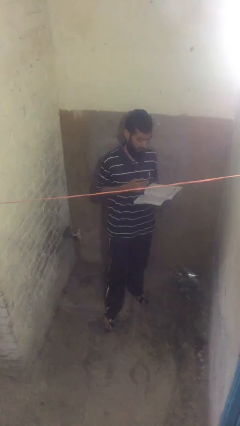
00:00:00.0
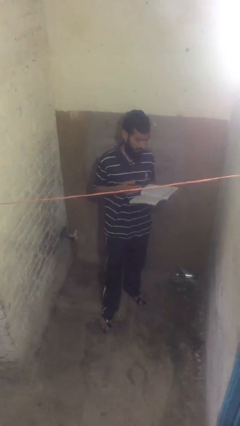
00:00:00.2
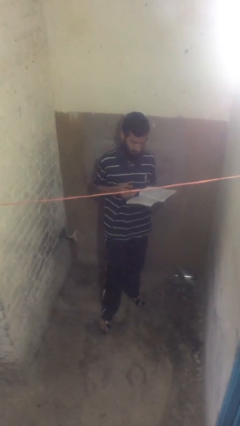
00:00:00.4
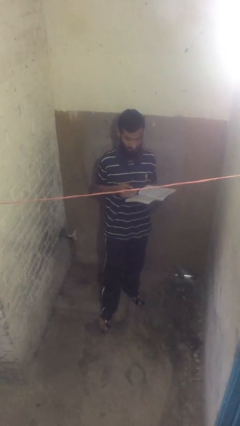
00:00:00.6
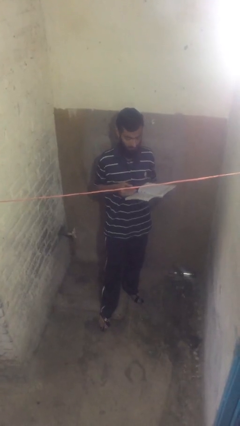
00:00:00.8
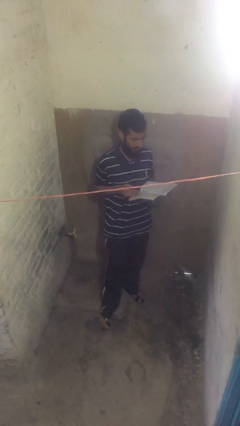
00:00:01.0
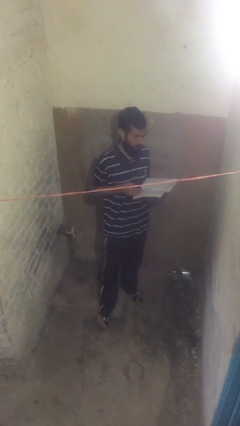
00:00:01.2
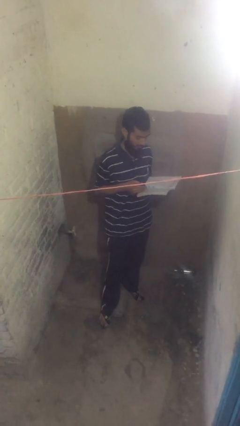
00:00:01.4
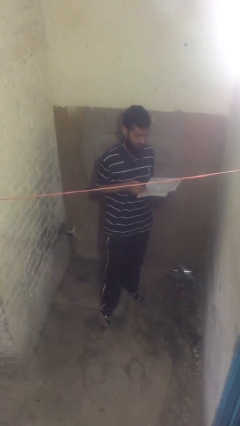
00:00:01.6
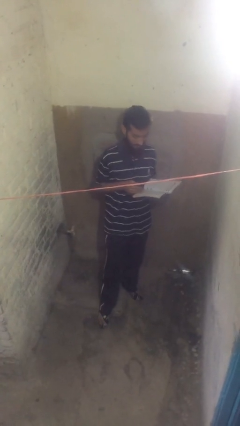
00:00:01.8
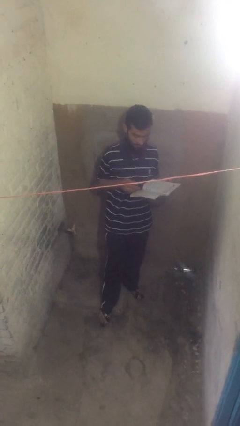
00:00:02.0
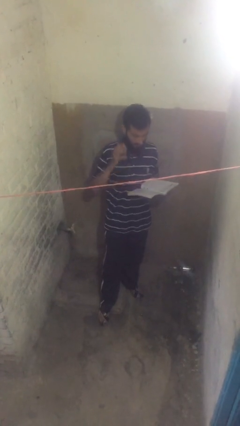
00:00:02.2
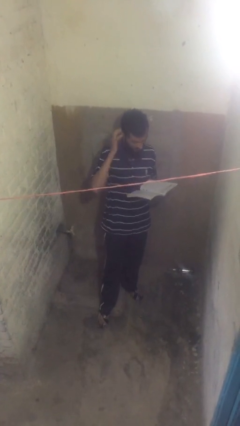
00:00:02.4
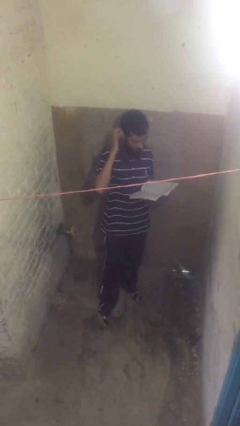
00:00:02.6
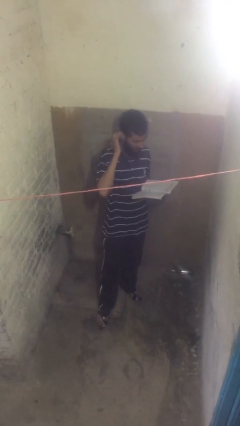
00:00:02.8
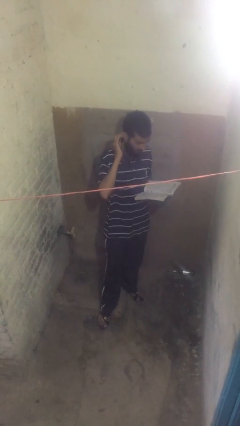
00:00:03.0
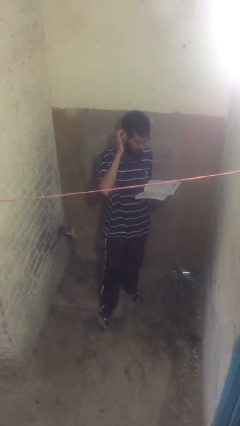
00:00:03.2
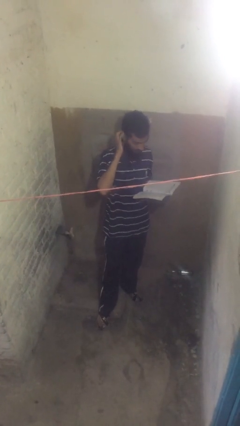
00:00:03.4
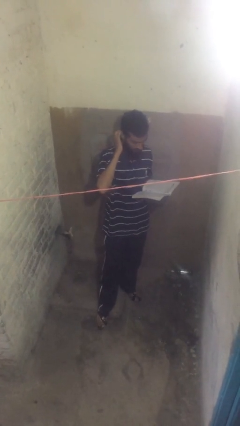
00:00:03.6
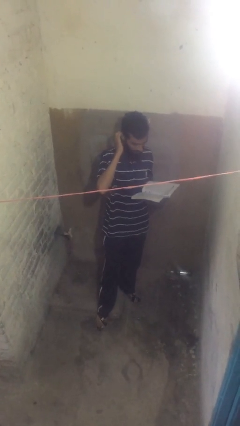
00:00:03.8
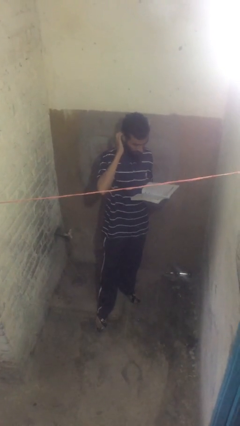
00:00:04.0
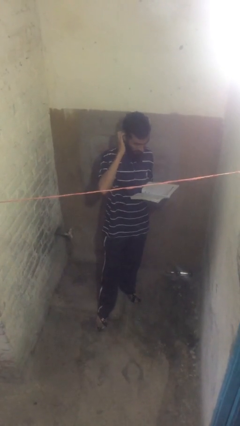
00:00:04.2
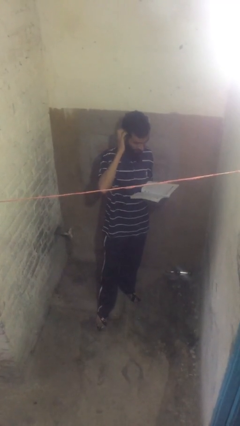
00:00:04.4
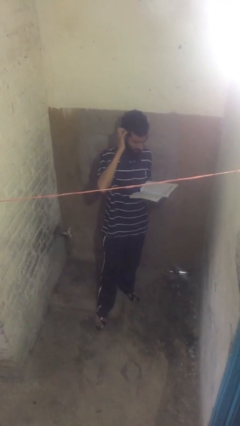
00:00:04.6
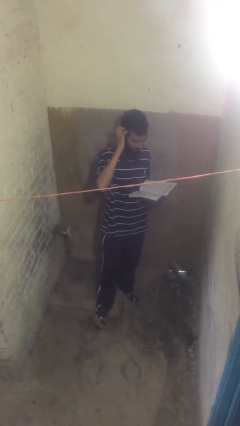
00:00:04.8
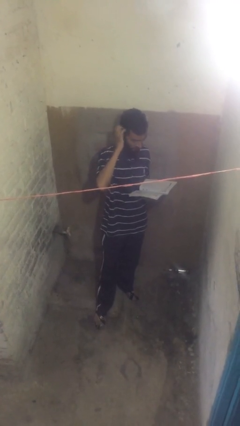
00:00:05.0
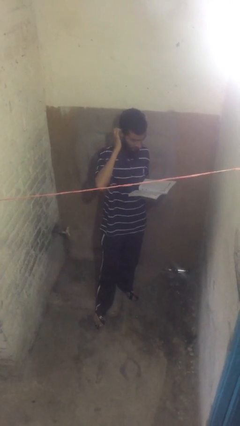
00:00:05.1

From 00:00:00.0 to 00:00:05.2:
person reads document

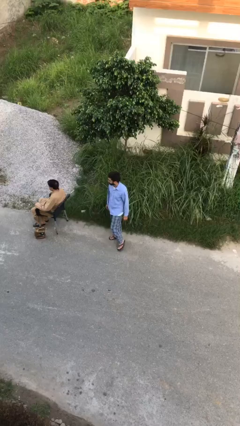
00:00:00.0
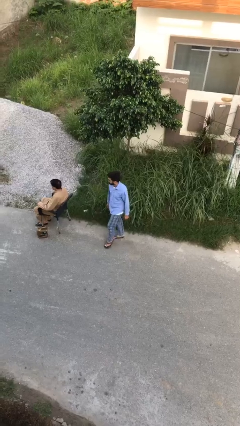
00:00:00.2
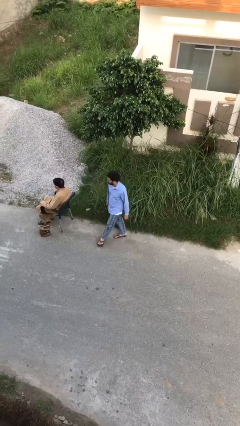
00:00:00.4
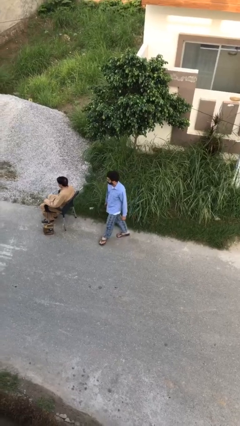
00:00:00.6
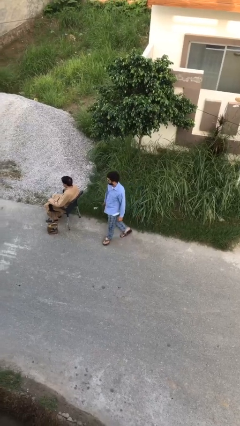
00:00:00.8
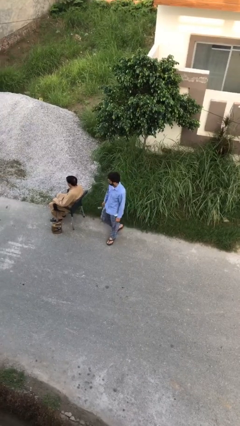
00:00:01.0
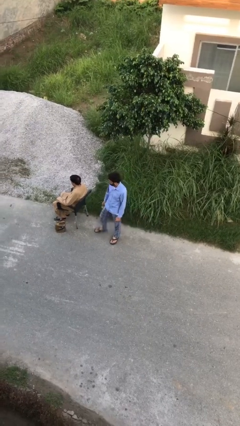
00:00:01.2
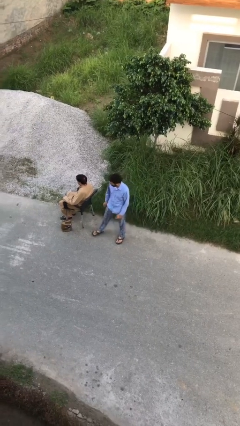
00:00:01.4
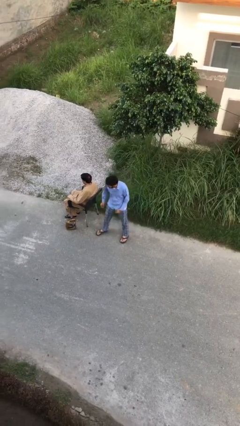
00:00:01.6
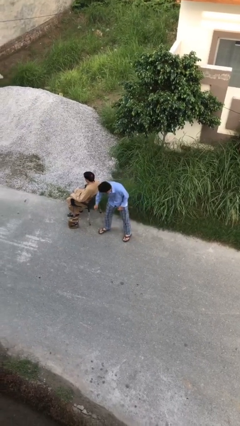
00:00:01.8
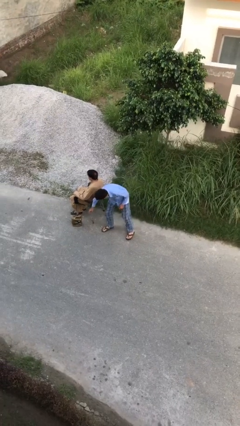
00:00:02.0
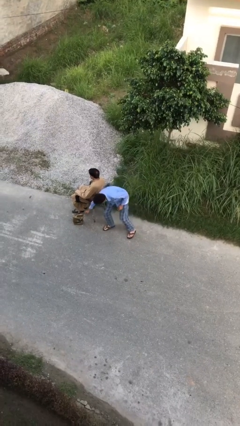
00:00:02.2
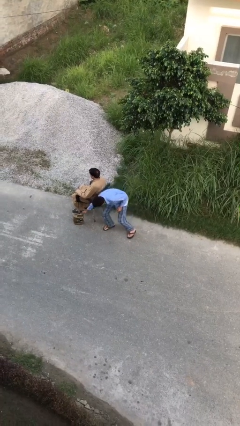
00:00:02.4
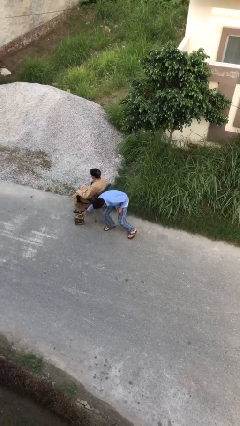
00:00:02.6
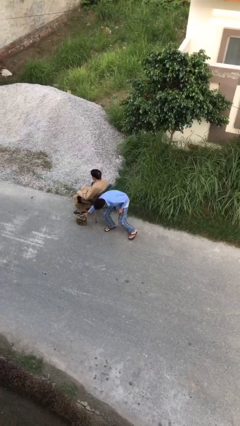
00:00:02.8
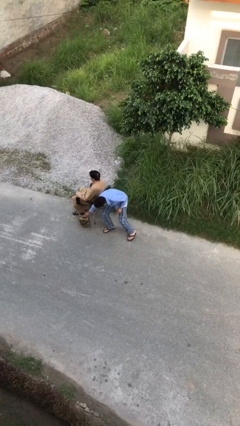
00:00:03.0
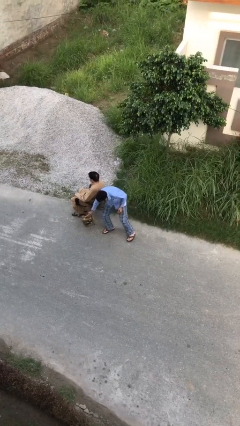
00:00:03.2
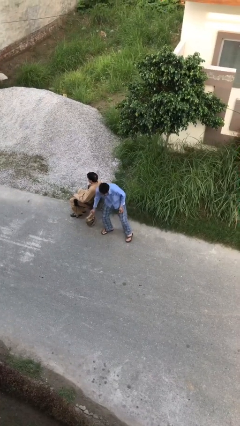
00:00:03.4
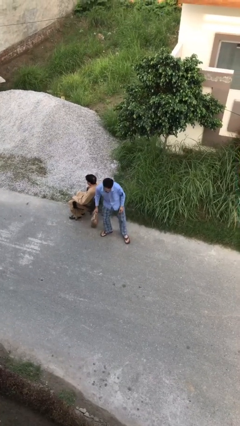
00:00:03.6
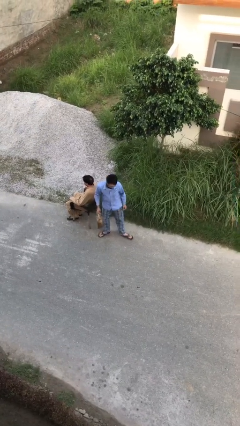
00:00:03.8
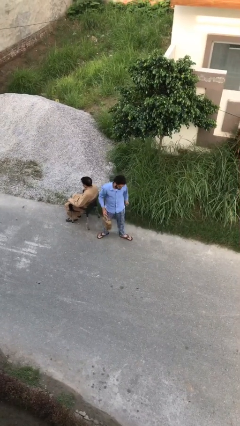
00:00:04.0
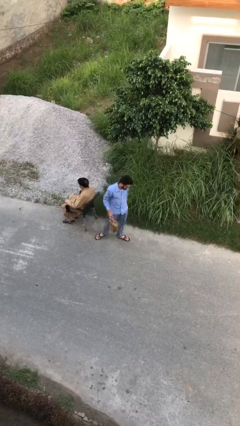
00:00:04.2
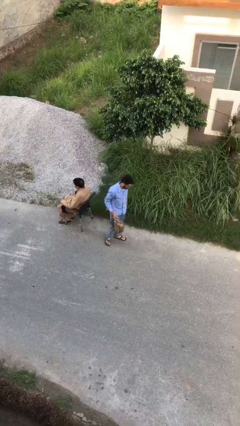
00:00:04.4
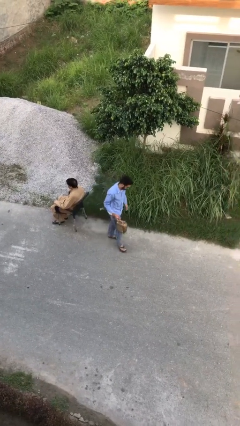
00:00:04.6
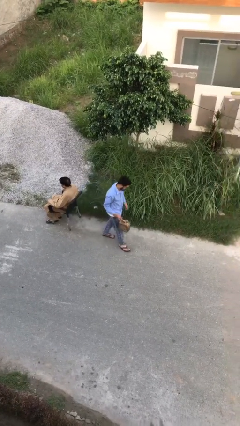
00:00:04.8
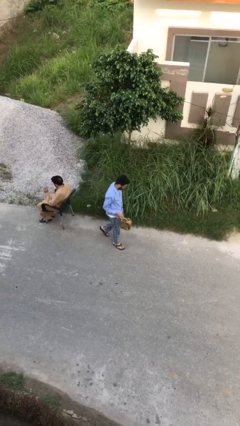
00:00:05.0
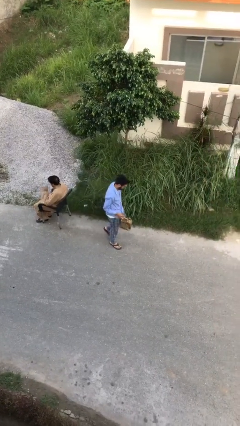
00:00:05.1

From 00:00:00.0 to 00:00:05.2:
person steals object from person

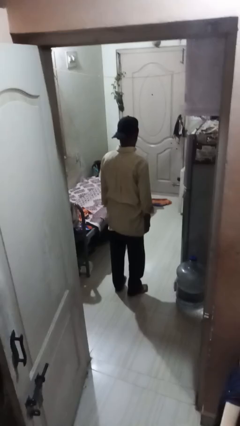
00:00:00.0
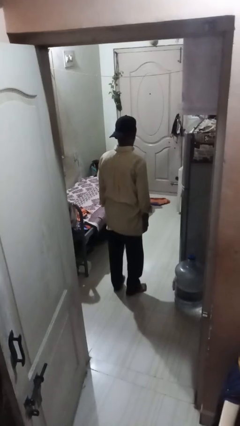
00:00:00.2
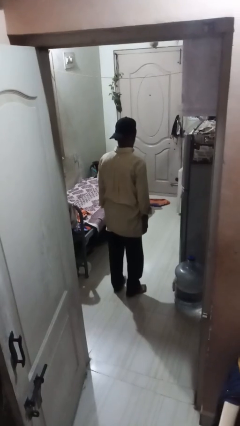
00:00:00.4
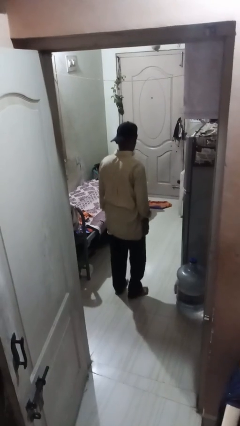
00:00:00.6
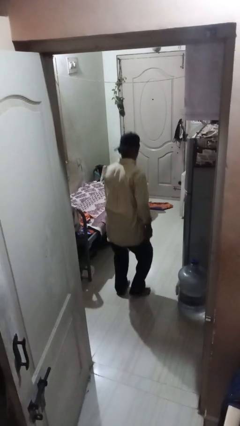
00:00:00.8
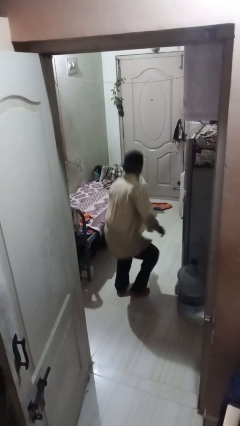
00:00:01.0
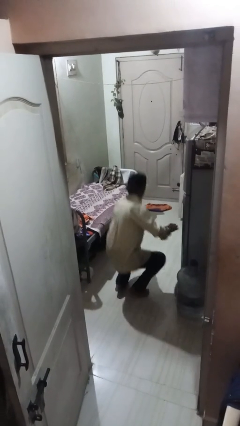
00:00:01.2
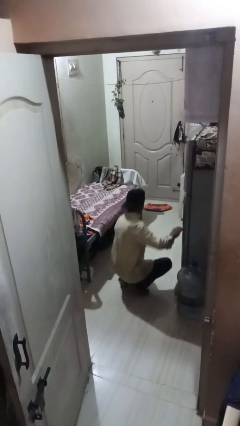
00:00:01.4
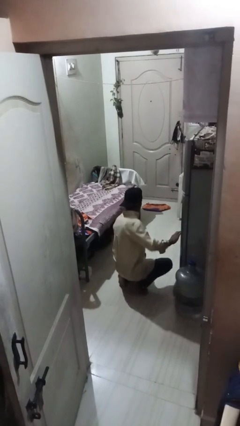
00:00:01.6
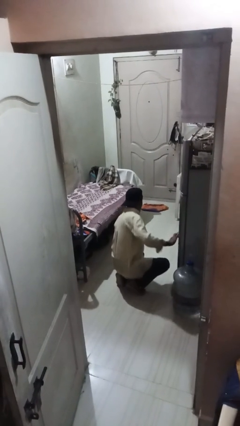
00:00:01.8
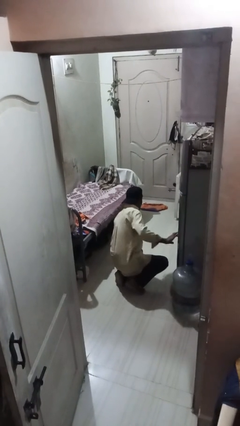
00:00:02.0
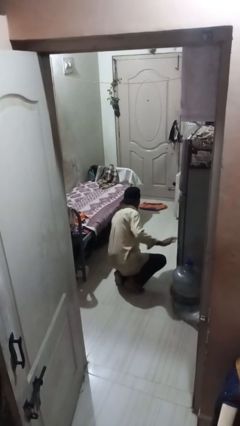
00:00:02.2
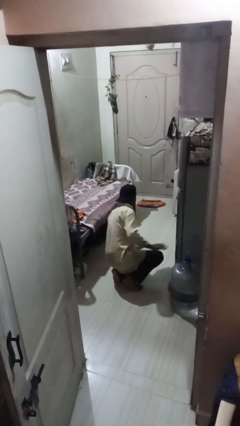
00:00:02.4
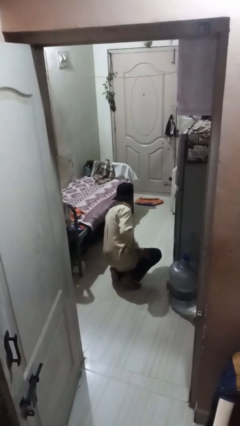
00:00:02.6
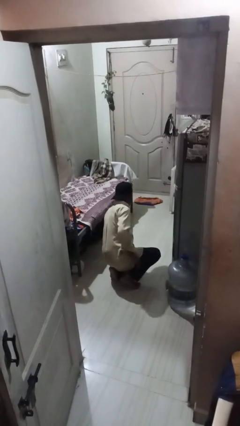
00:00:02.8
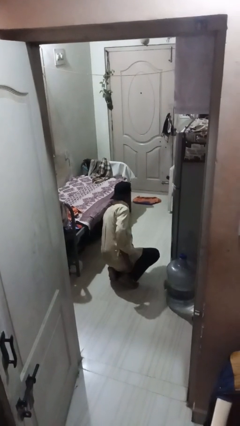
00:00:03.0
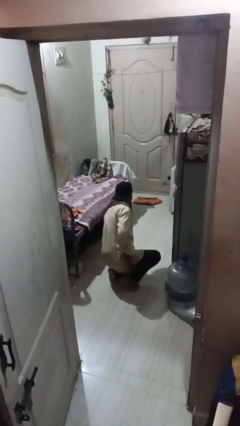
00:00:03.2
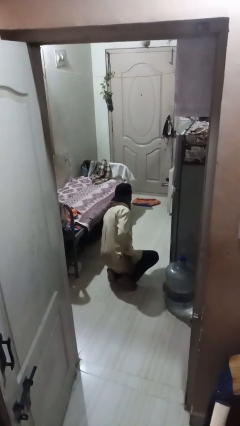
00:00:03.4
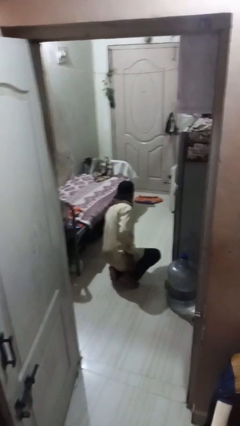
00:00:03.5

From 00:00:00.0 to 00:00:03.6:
person kneels

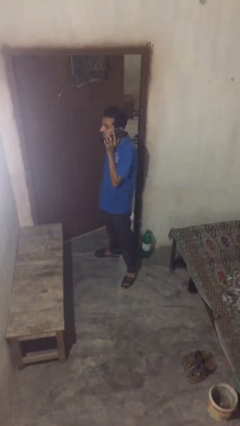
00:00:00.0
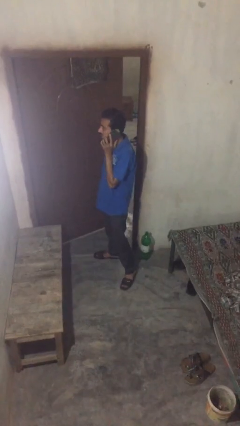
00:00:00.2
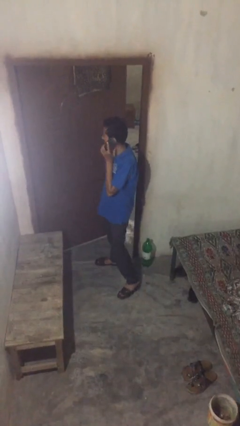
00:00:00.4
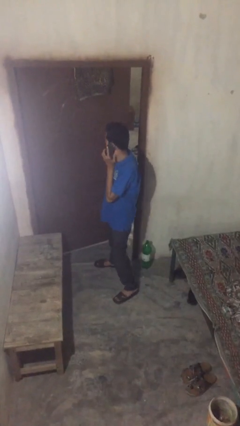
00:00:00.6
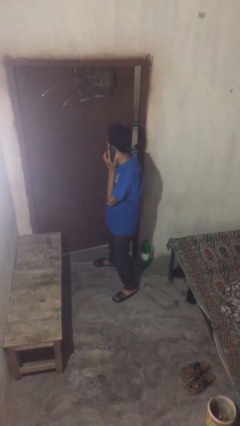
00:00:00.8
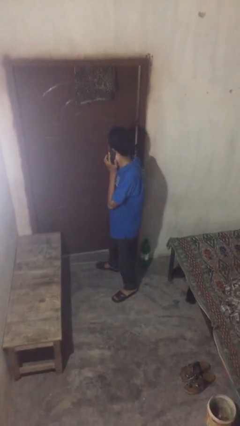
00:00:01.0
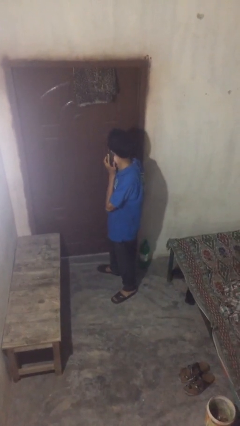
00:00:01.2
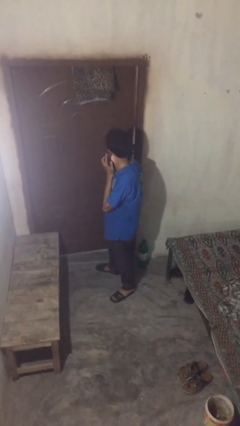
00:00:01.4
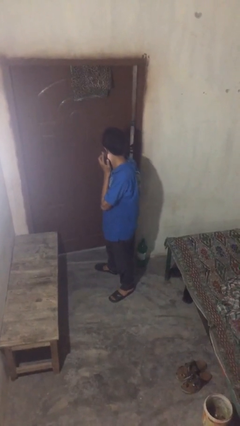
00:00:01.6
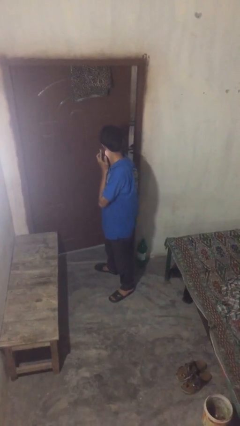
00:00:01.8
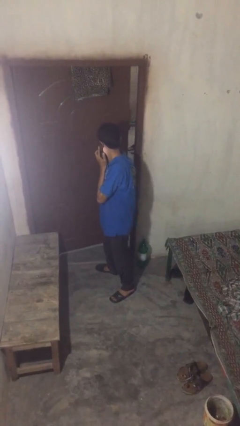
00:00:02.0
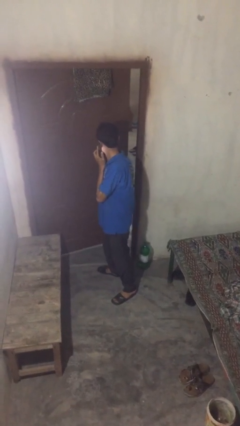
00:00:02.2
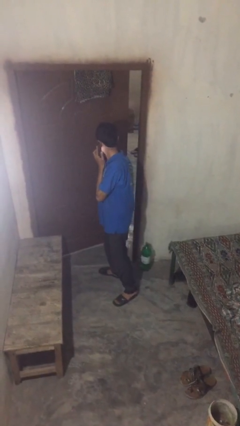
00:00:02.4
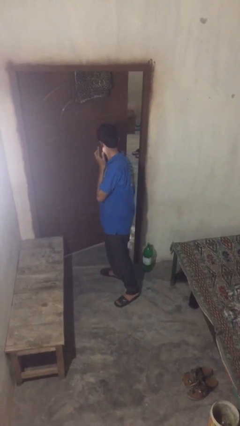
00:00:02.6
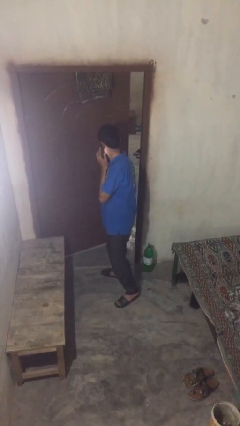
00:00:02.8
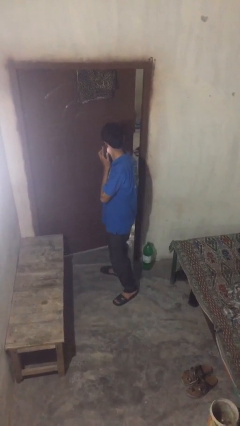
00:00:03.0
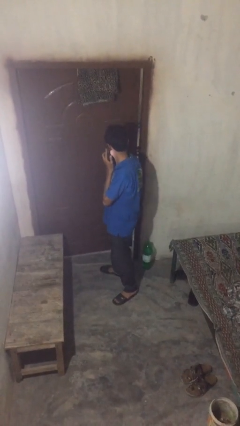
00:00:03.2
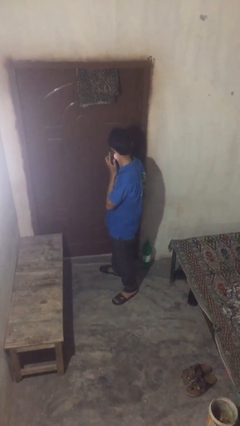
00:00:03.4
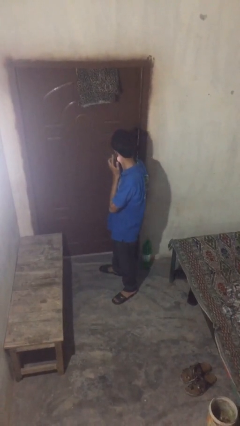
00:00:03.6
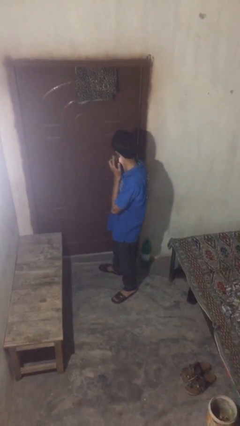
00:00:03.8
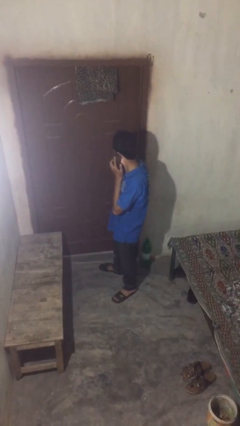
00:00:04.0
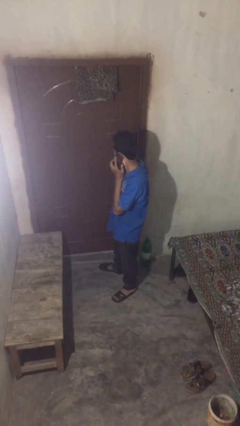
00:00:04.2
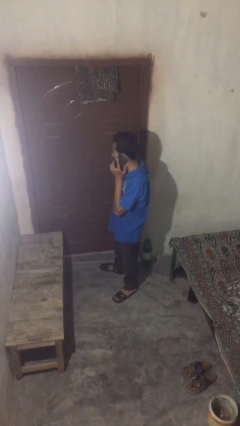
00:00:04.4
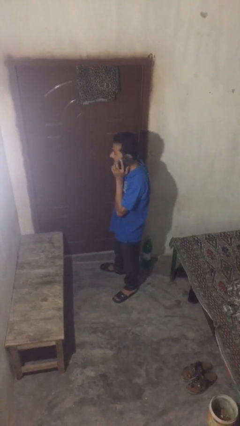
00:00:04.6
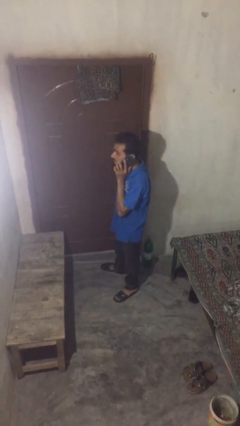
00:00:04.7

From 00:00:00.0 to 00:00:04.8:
person closes facility door
